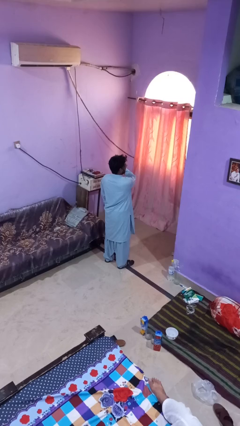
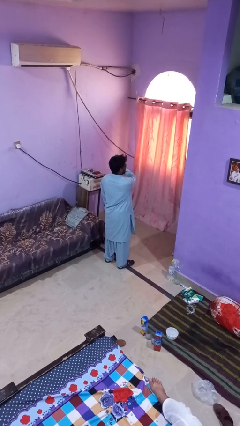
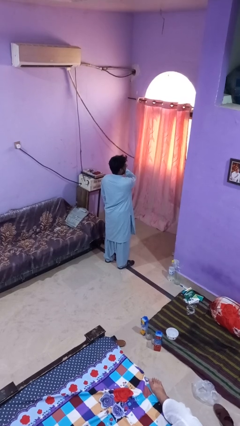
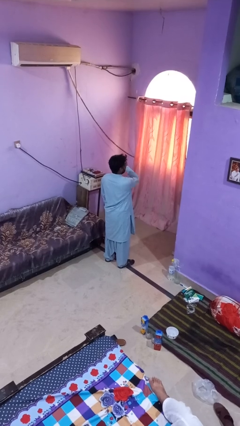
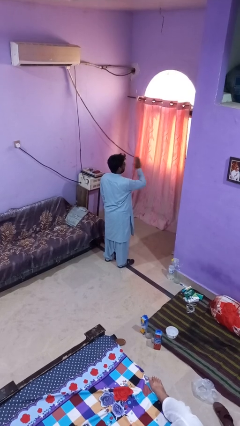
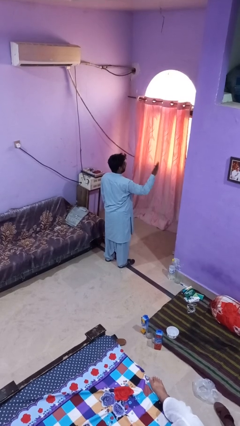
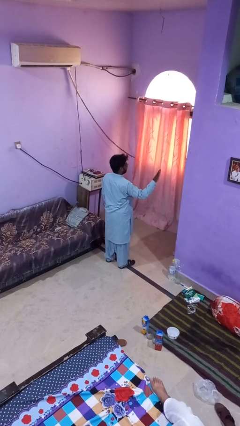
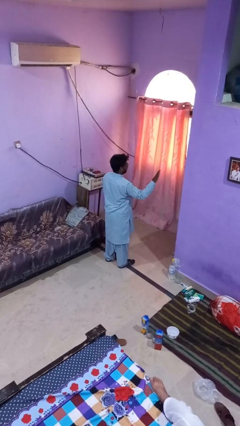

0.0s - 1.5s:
person gestures swipe right

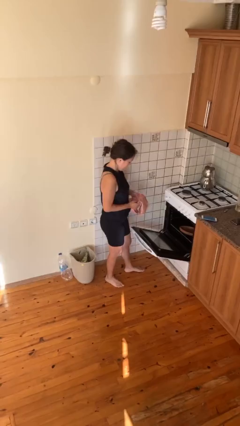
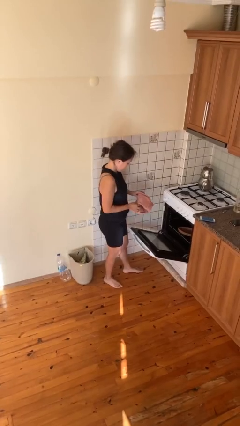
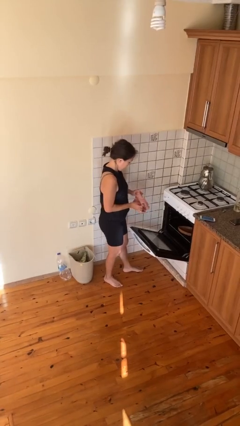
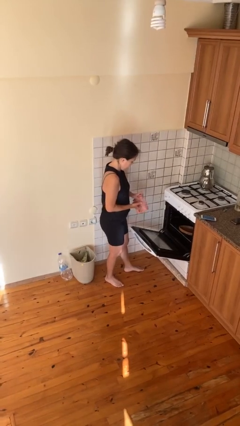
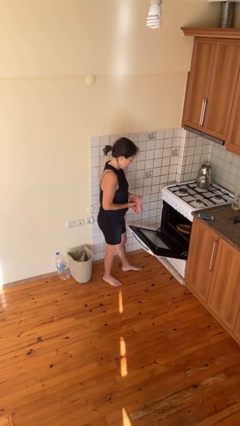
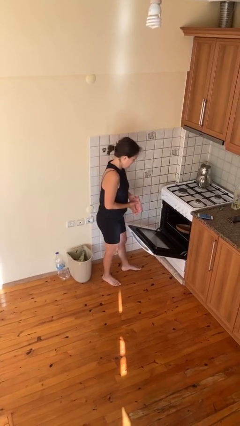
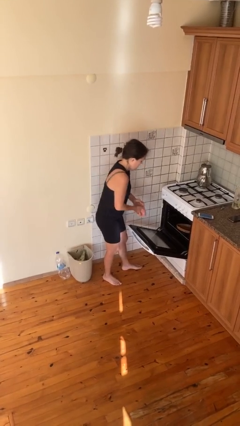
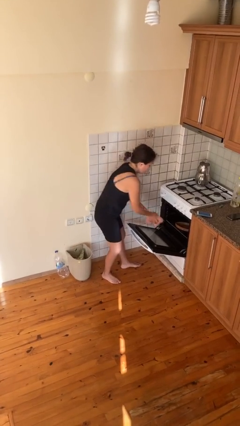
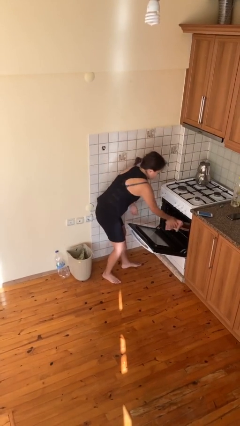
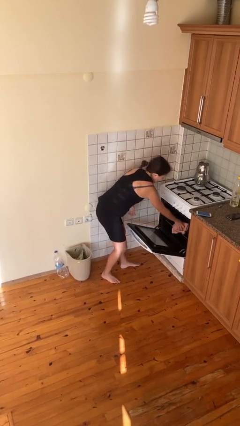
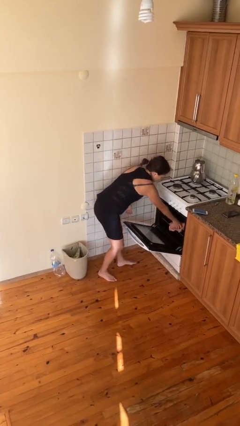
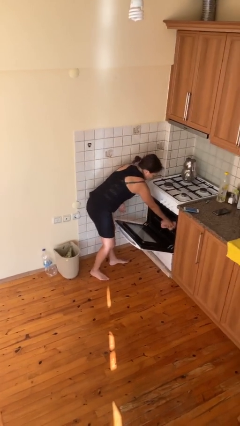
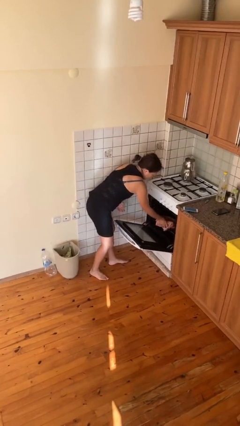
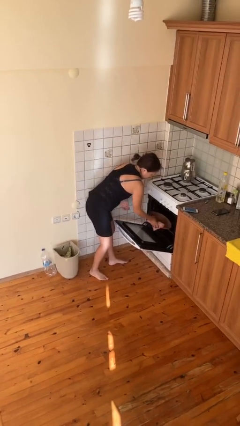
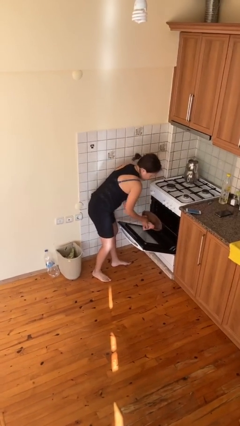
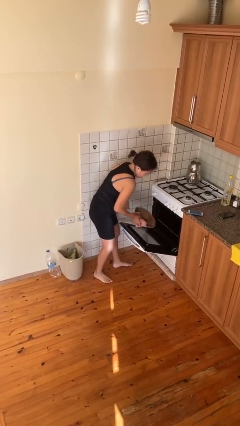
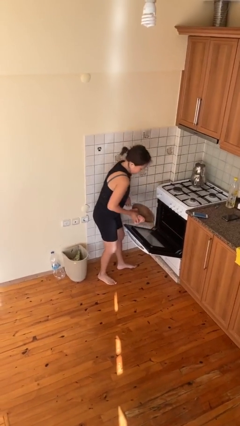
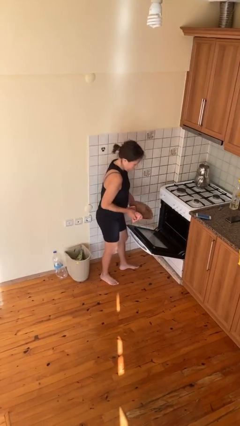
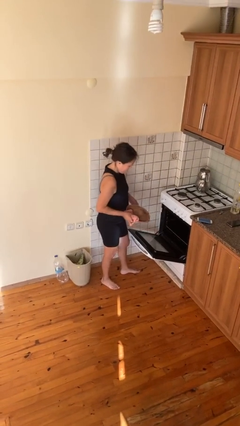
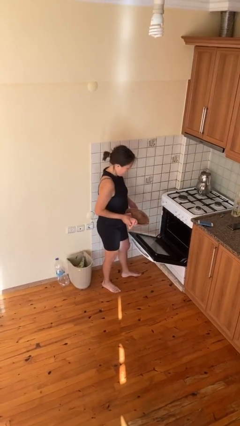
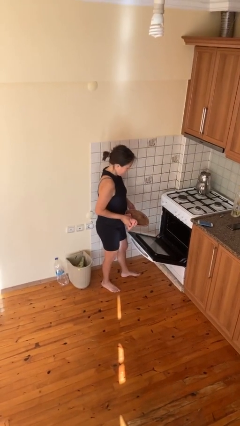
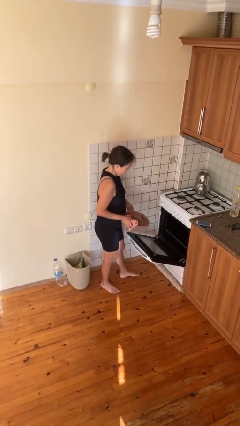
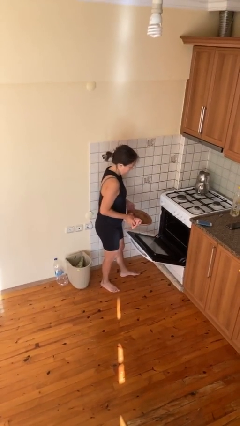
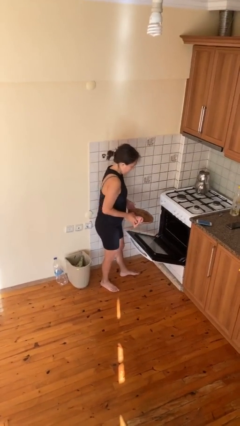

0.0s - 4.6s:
person takes object from oven

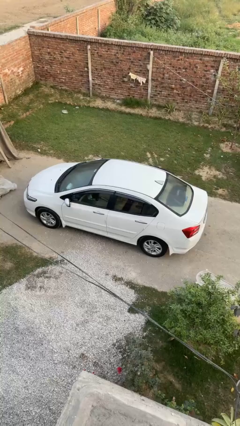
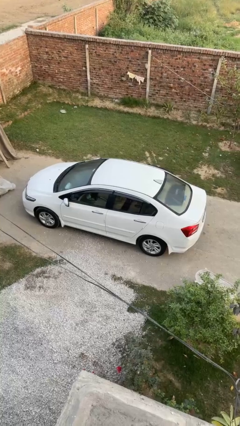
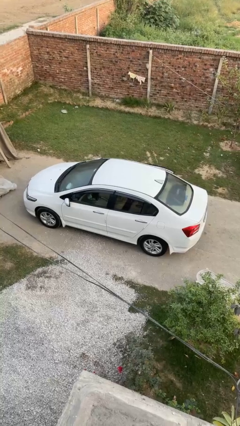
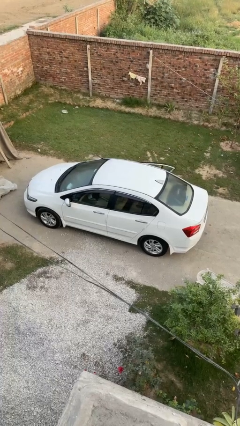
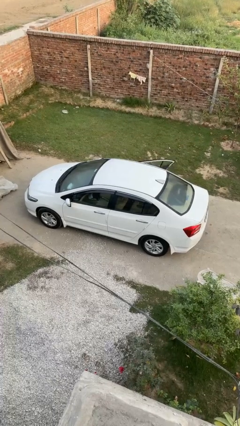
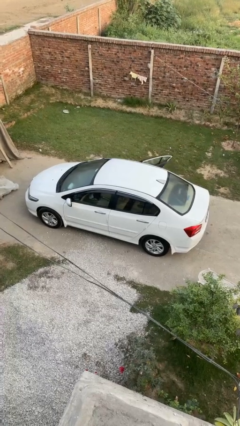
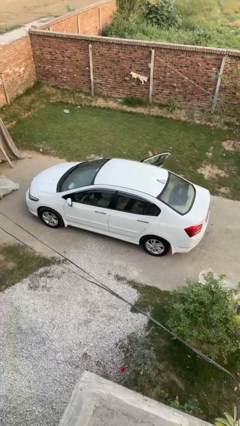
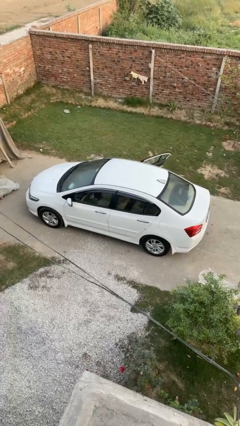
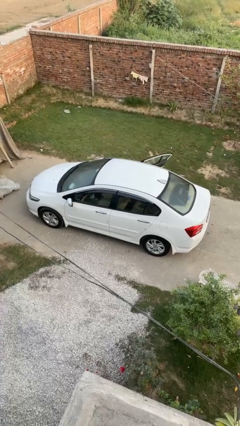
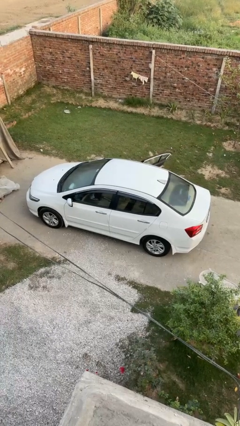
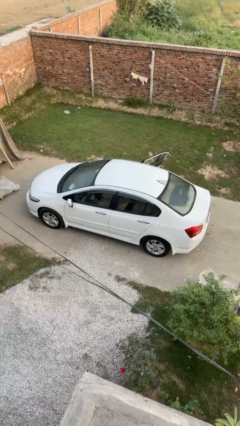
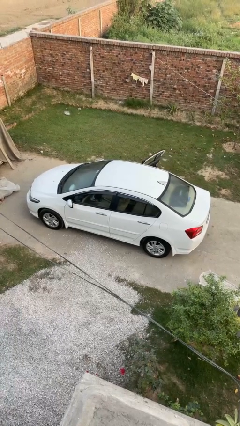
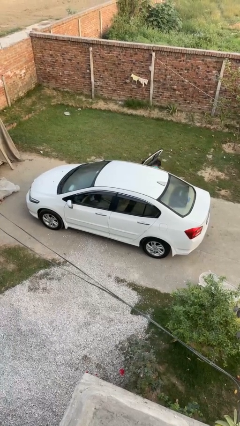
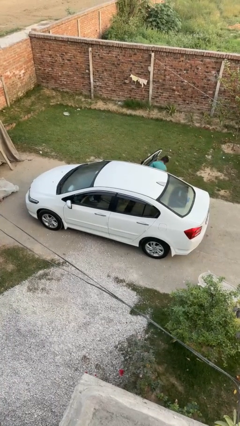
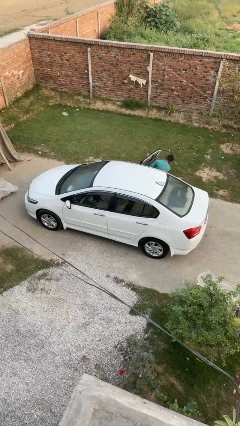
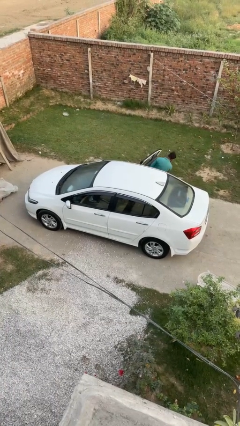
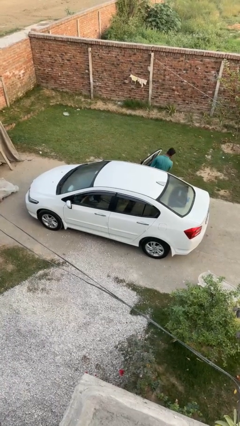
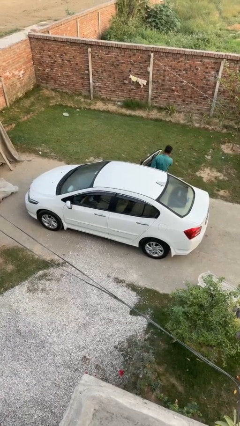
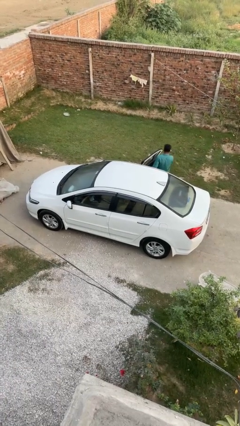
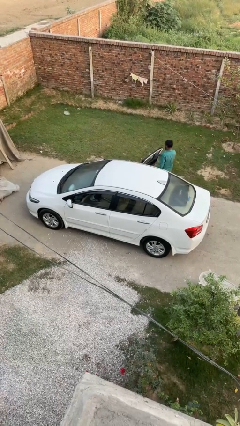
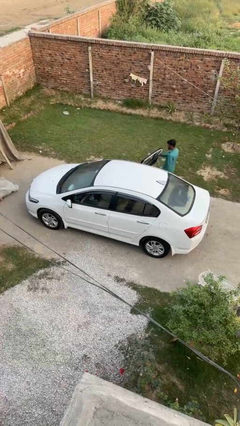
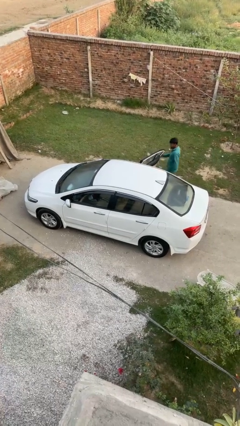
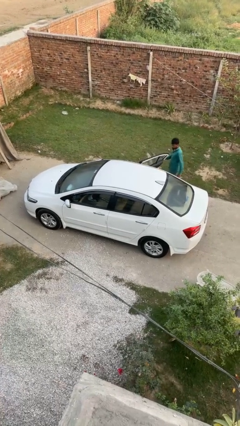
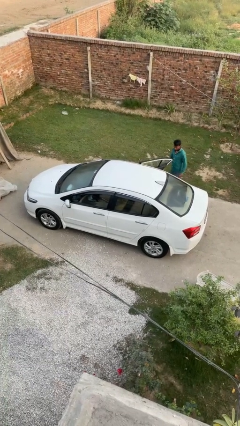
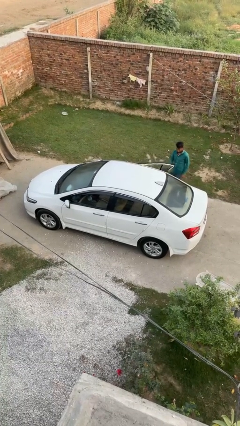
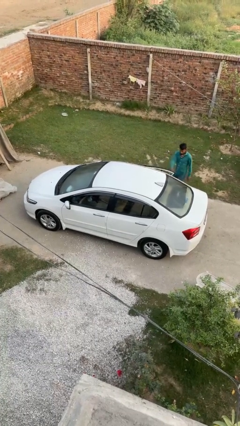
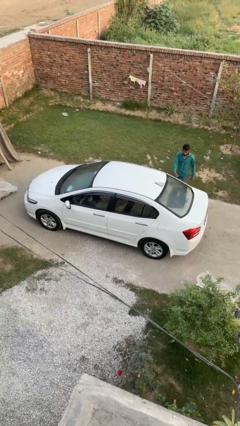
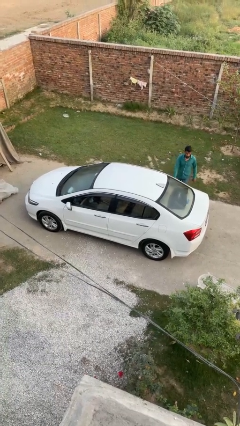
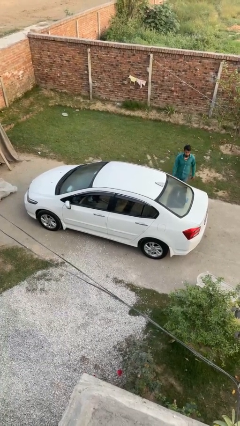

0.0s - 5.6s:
car drops off person

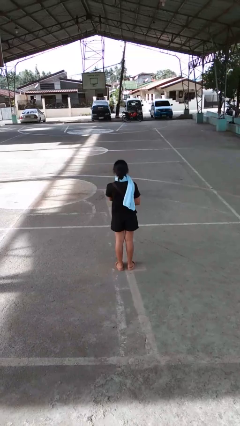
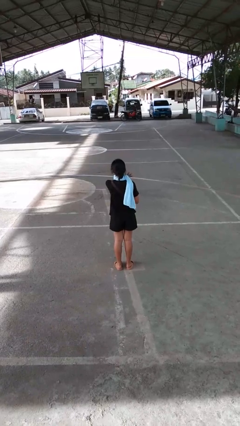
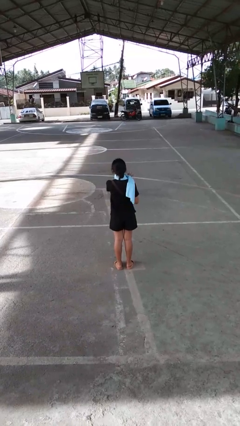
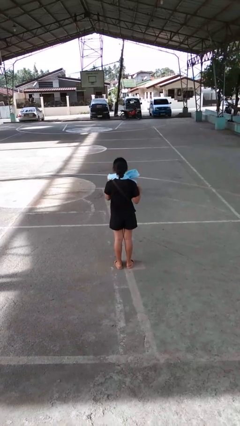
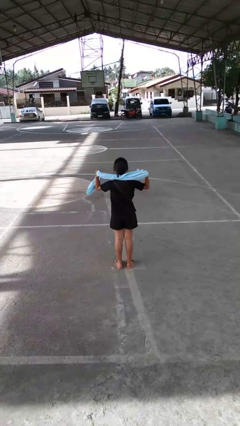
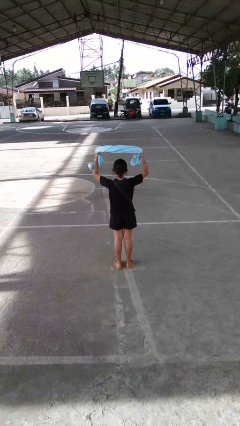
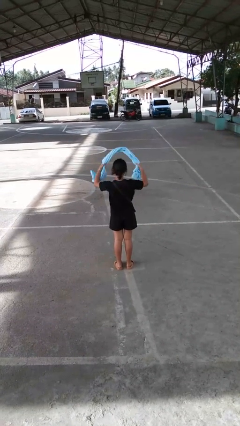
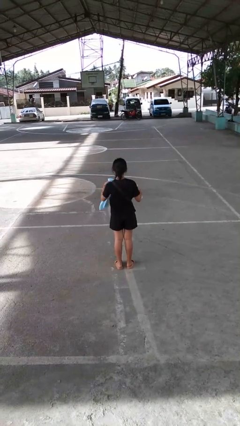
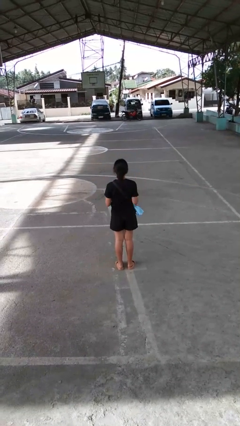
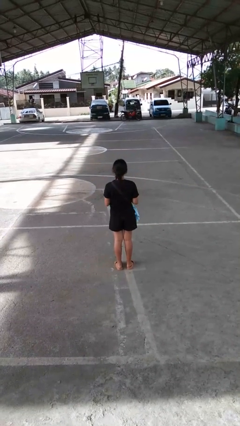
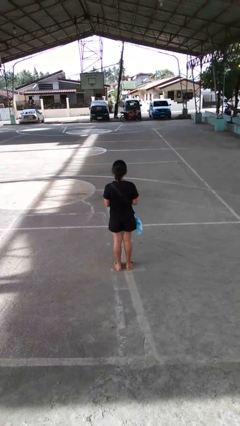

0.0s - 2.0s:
person takes off scarf

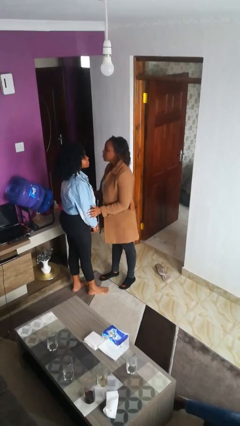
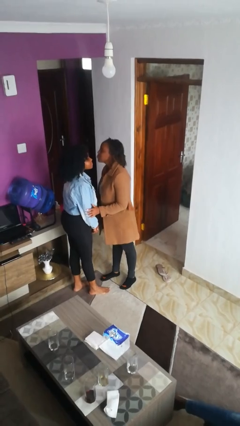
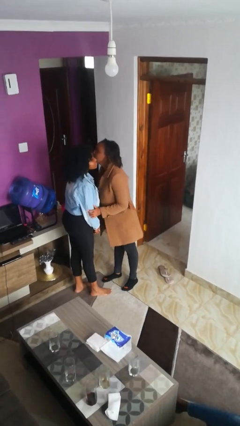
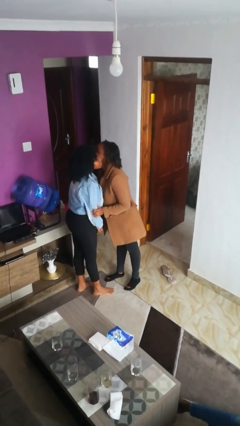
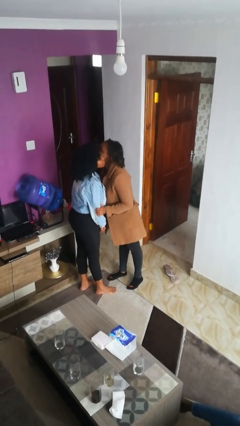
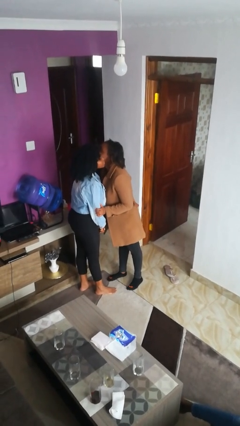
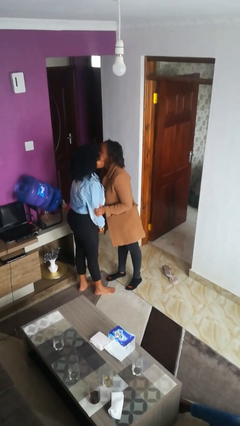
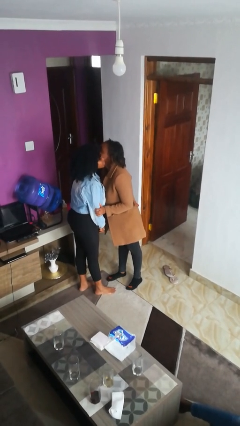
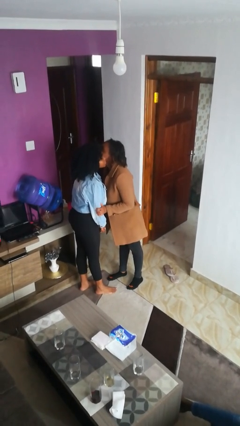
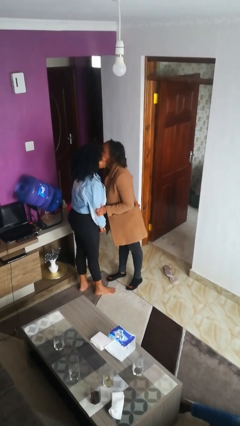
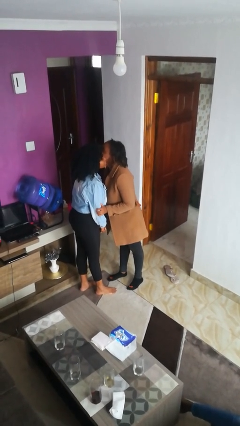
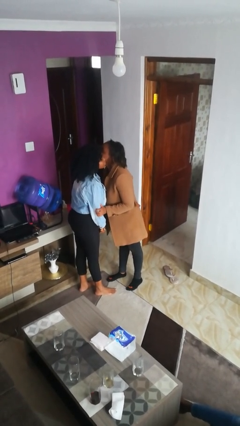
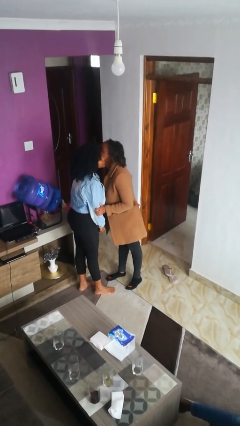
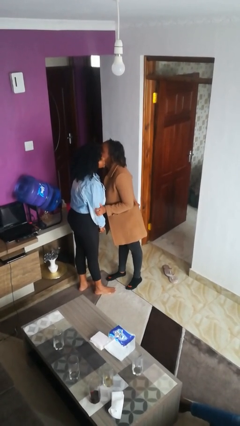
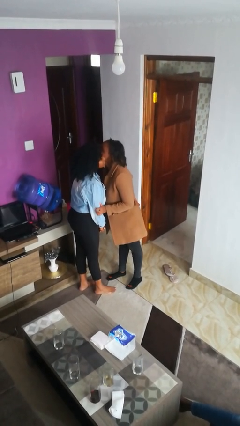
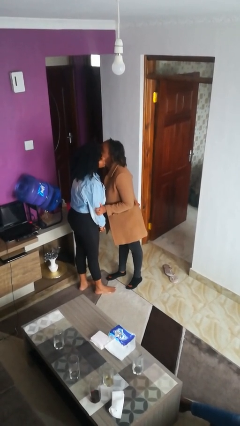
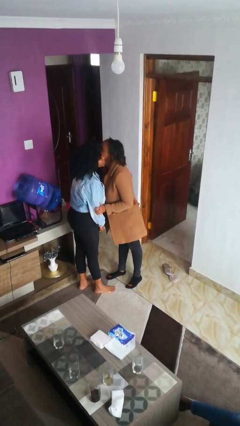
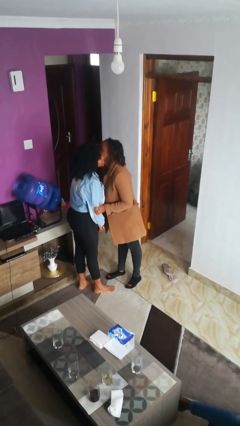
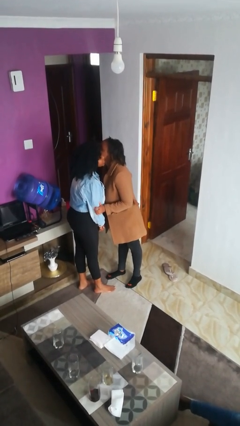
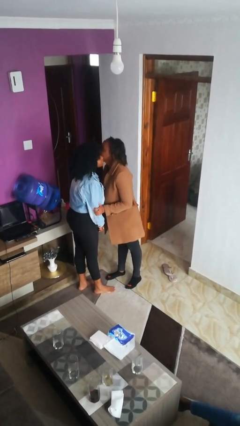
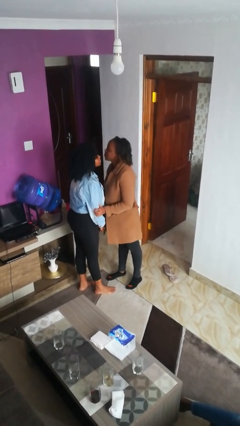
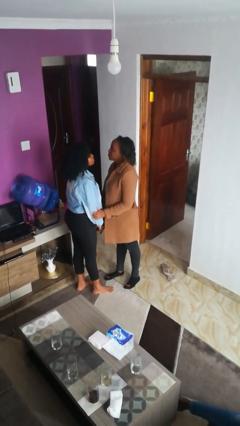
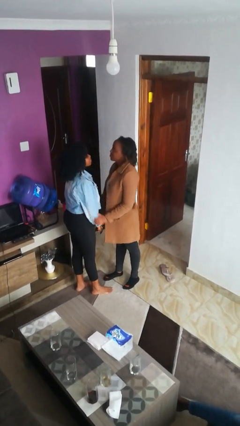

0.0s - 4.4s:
person kisses cheek of person
